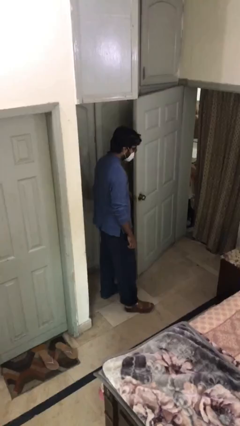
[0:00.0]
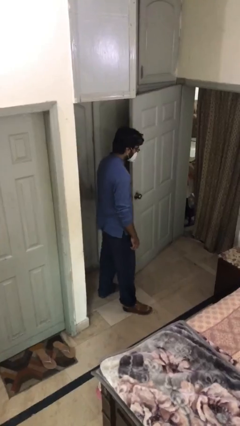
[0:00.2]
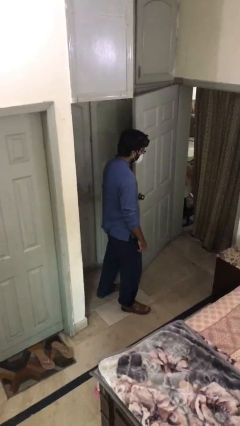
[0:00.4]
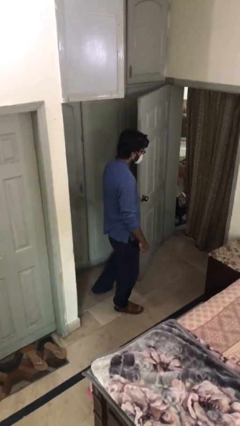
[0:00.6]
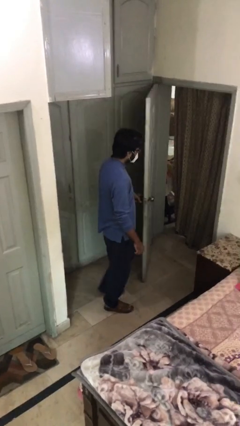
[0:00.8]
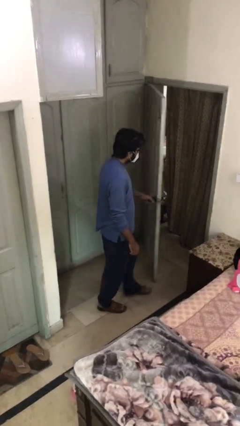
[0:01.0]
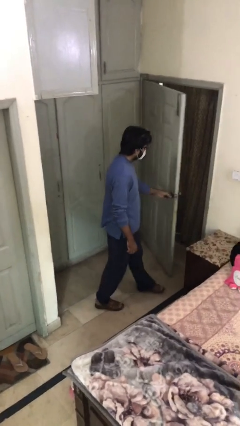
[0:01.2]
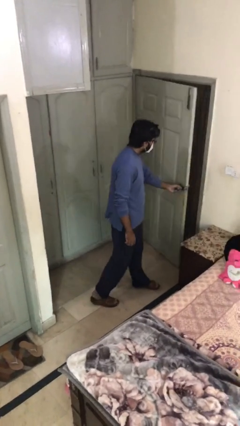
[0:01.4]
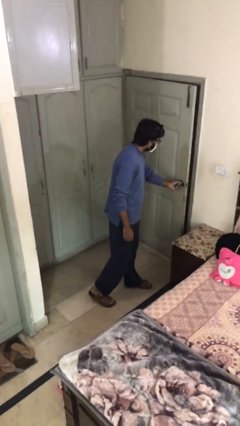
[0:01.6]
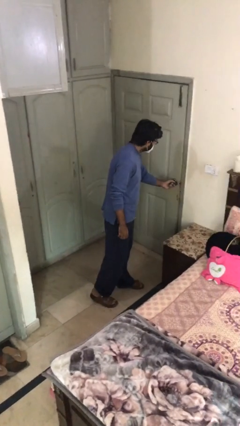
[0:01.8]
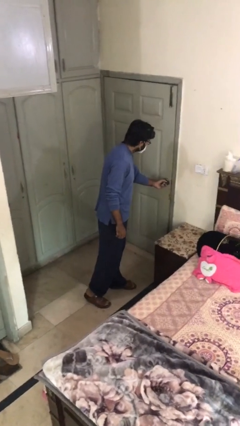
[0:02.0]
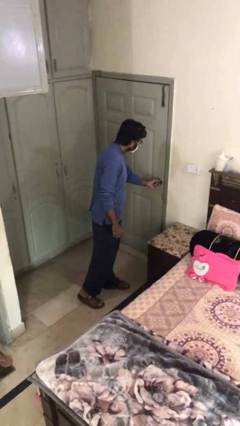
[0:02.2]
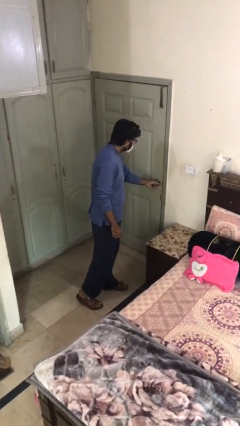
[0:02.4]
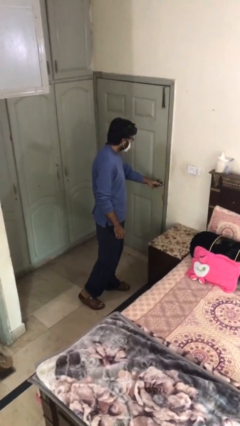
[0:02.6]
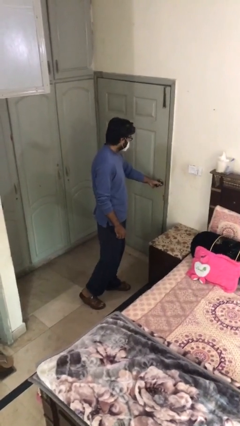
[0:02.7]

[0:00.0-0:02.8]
person closes facility door

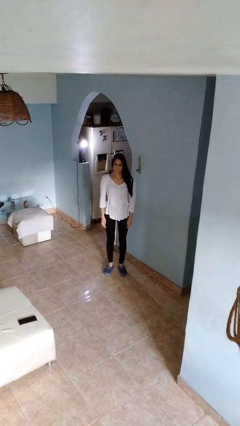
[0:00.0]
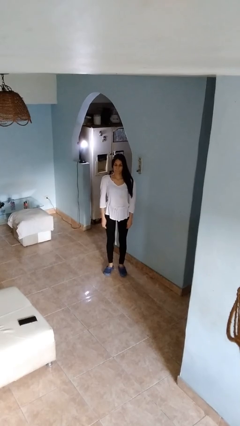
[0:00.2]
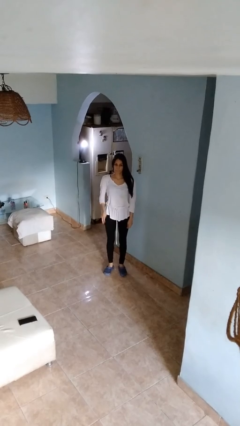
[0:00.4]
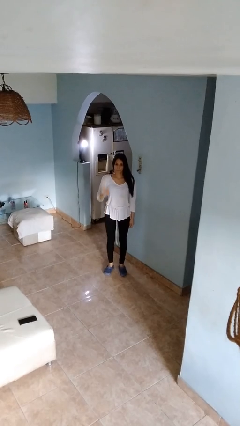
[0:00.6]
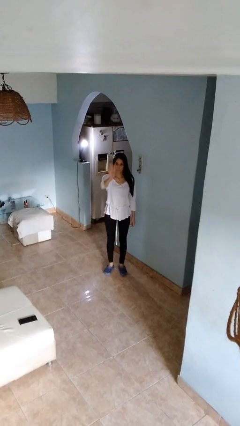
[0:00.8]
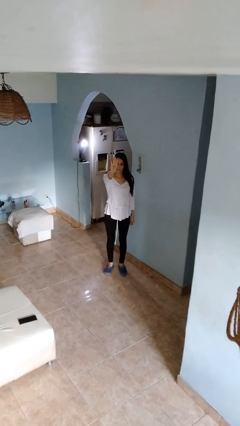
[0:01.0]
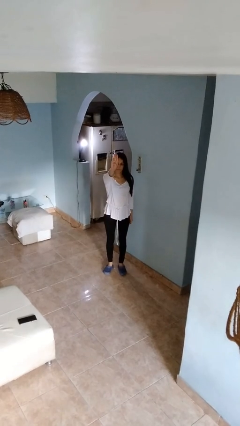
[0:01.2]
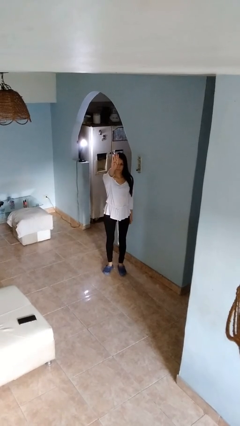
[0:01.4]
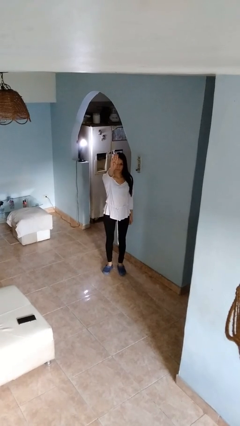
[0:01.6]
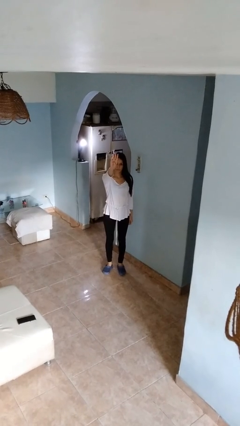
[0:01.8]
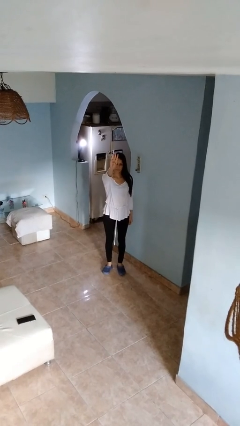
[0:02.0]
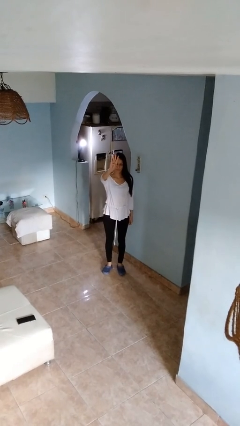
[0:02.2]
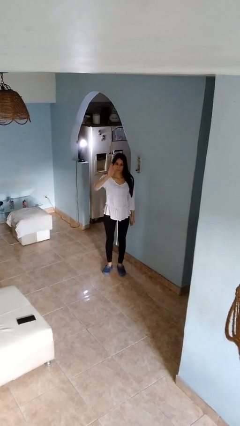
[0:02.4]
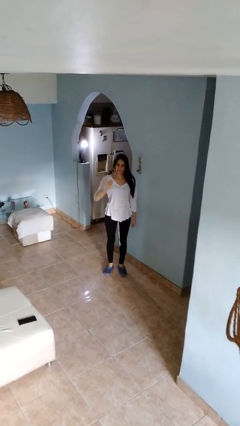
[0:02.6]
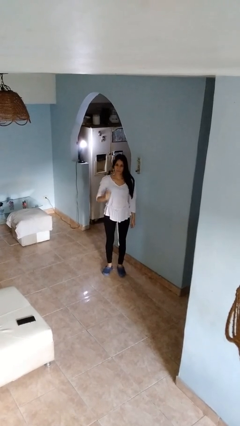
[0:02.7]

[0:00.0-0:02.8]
person gestures number four

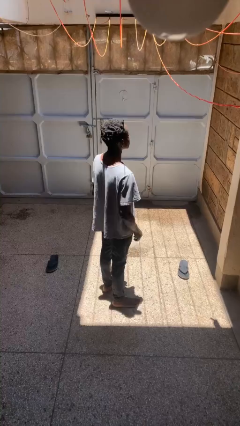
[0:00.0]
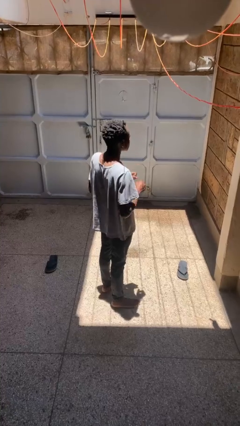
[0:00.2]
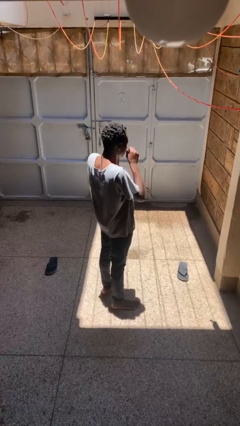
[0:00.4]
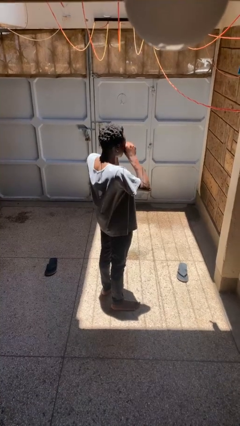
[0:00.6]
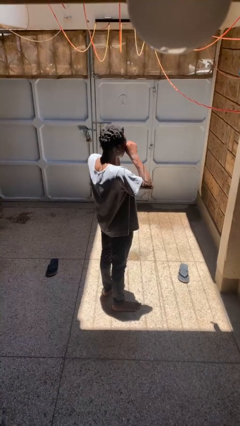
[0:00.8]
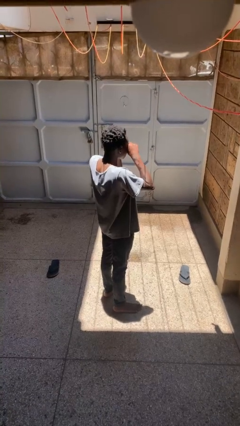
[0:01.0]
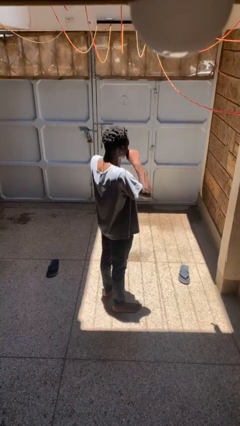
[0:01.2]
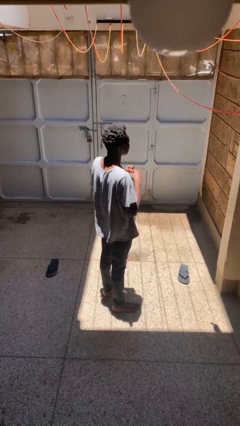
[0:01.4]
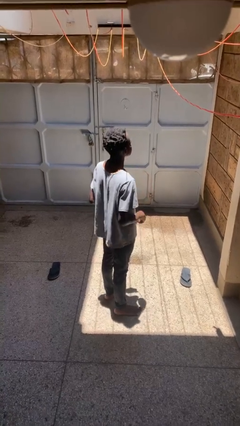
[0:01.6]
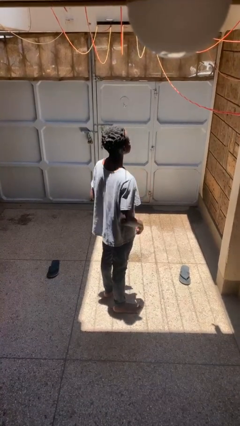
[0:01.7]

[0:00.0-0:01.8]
person rubs eyes

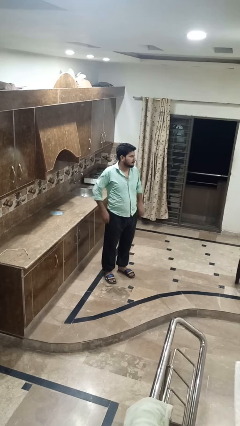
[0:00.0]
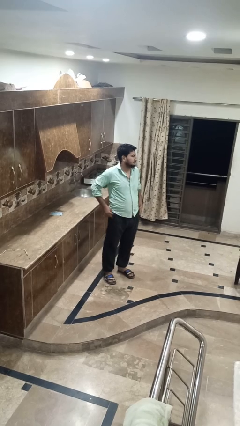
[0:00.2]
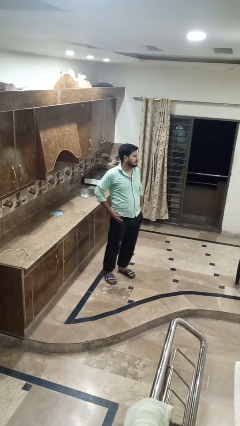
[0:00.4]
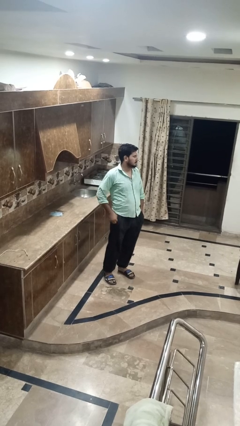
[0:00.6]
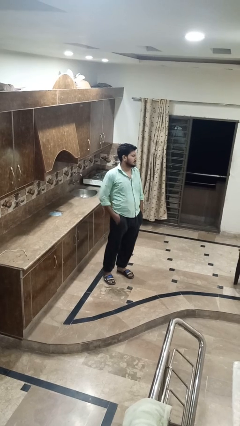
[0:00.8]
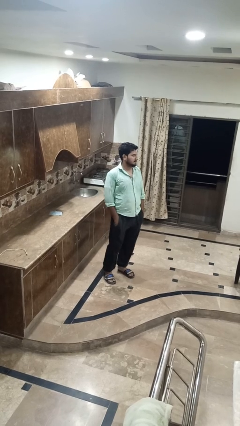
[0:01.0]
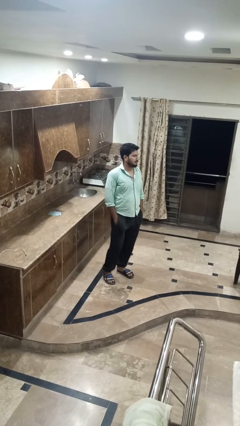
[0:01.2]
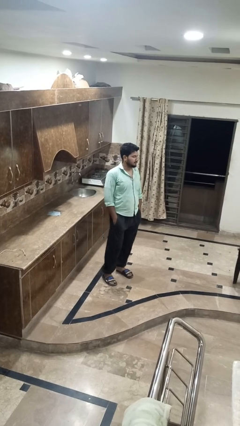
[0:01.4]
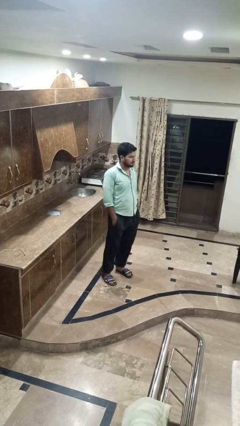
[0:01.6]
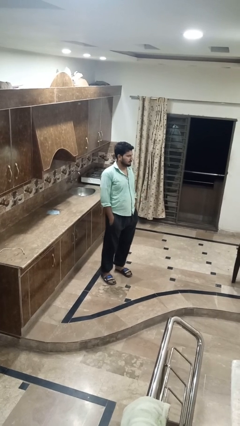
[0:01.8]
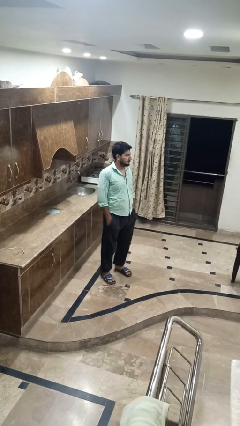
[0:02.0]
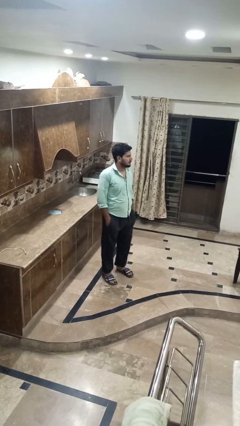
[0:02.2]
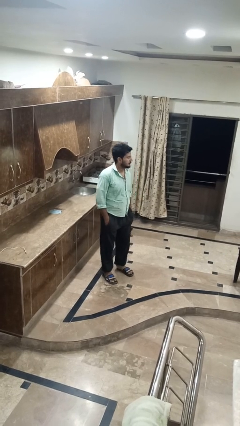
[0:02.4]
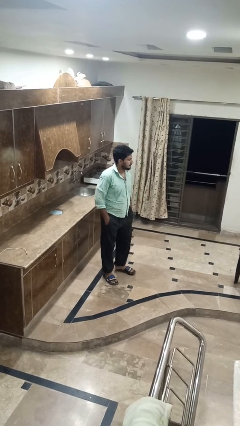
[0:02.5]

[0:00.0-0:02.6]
person puts hands in back pockets

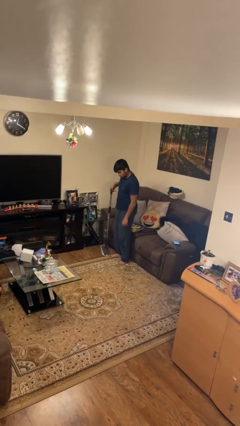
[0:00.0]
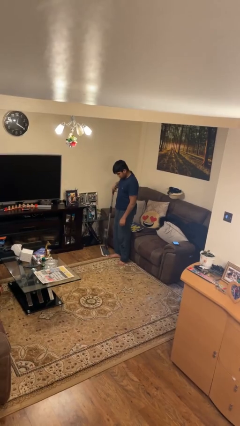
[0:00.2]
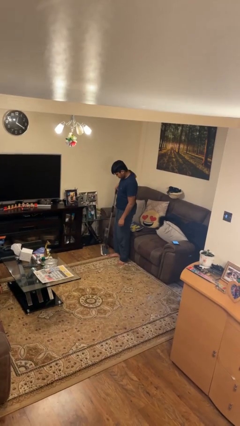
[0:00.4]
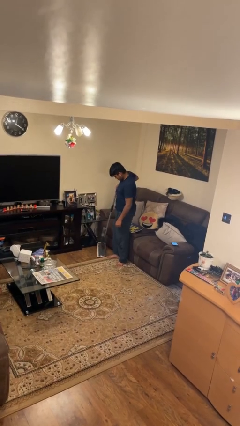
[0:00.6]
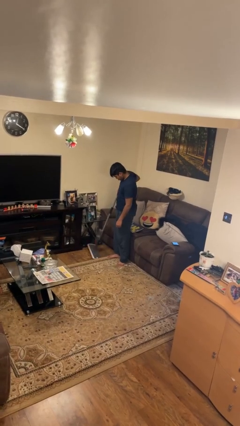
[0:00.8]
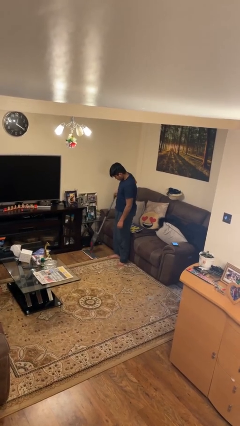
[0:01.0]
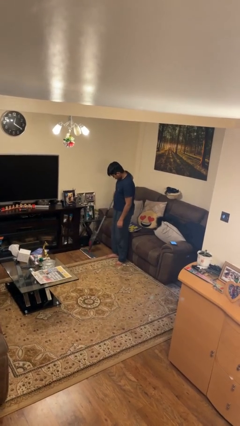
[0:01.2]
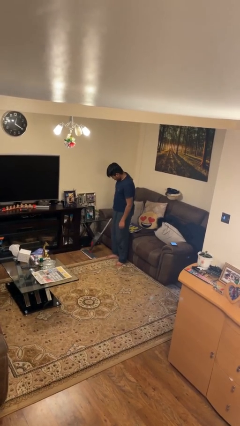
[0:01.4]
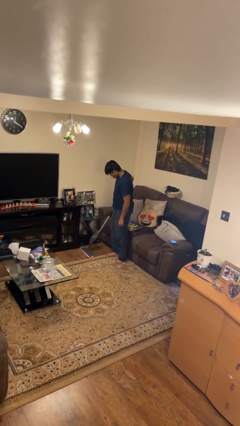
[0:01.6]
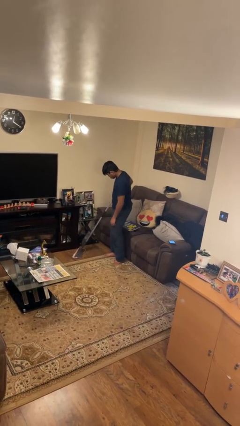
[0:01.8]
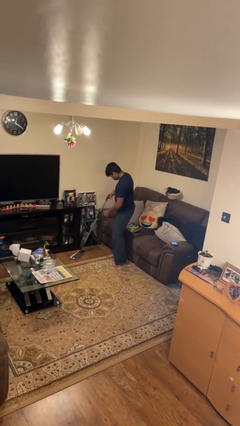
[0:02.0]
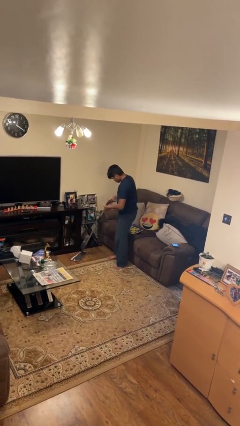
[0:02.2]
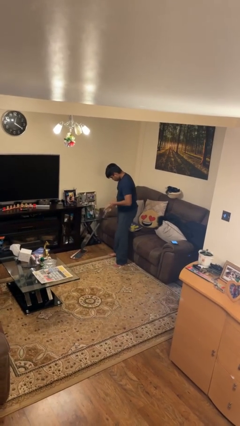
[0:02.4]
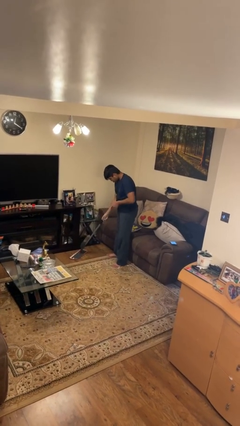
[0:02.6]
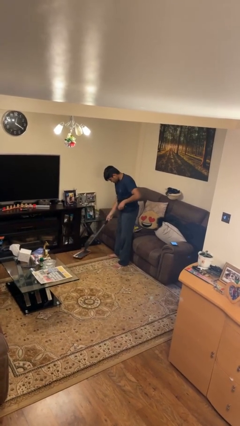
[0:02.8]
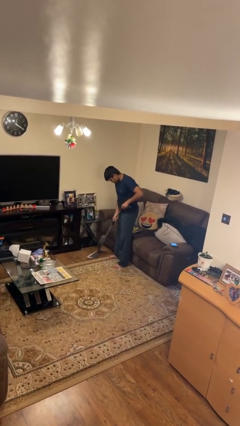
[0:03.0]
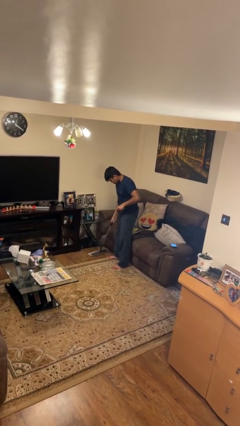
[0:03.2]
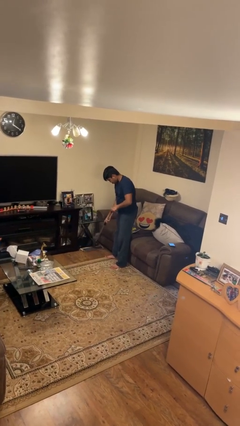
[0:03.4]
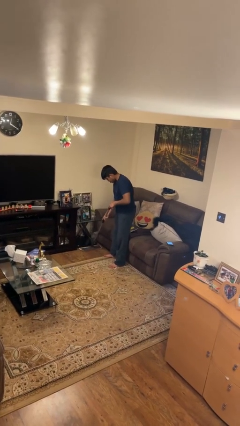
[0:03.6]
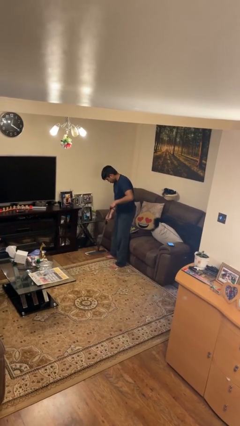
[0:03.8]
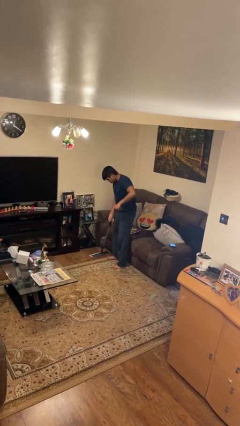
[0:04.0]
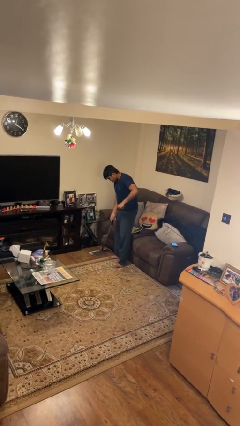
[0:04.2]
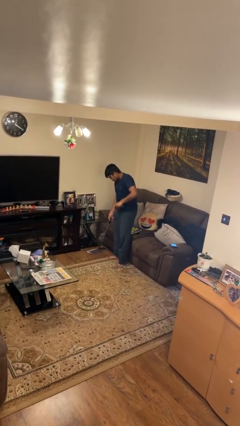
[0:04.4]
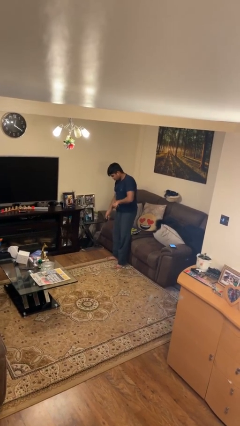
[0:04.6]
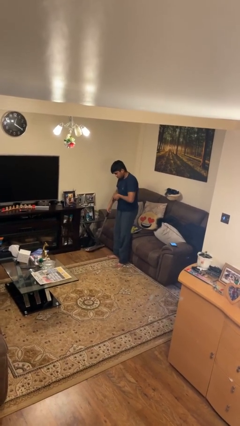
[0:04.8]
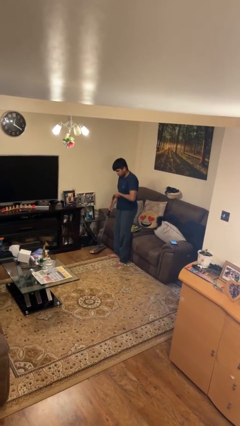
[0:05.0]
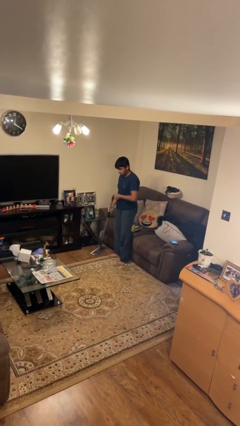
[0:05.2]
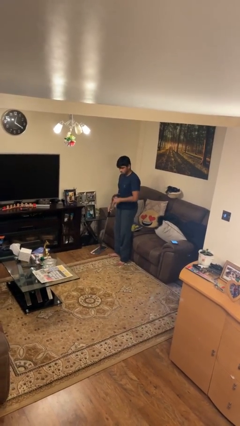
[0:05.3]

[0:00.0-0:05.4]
person mops

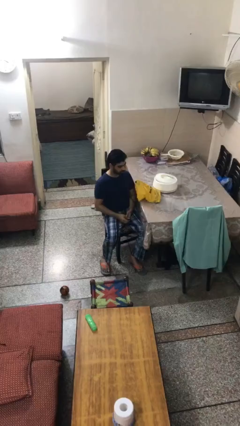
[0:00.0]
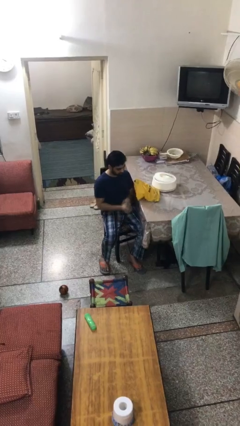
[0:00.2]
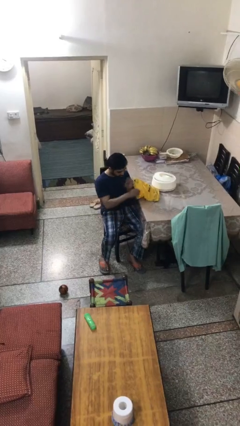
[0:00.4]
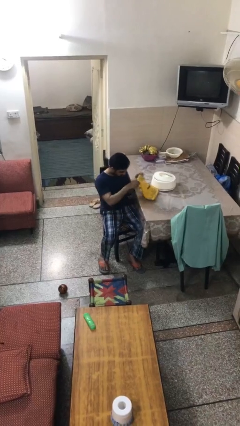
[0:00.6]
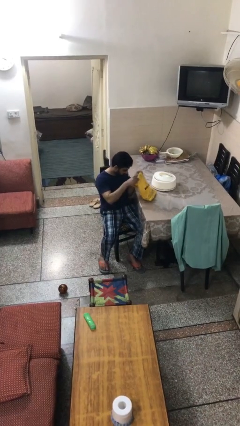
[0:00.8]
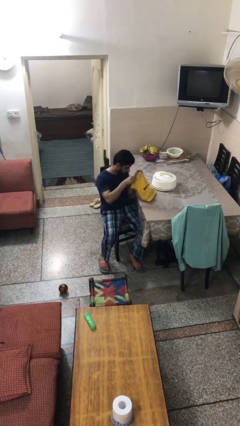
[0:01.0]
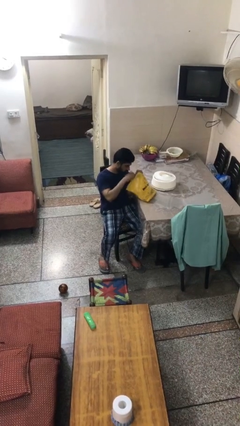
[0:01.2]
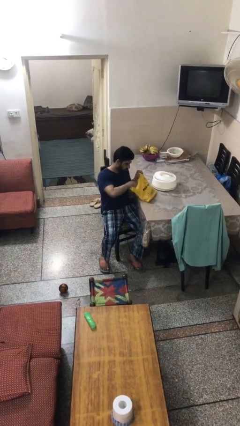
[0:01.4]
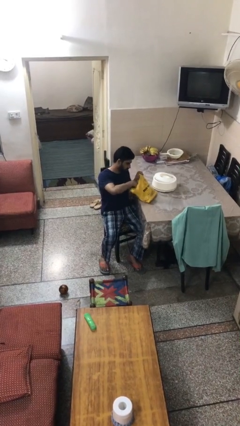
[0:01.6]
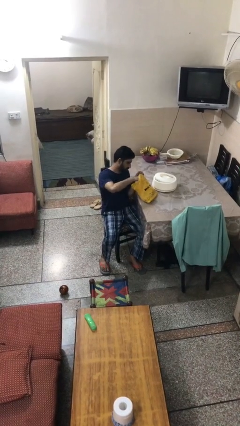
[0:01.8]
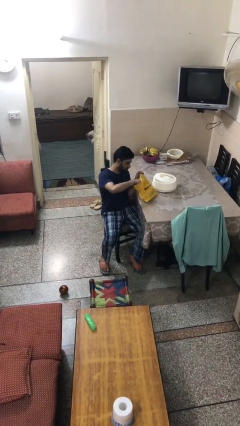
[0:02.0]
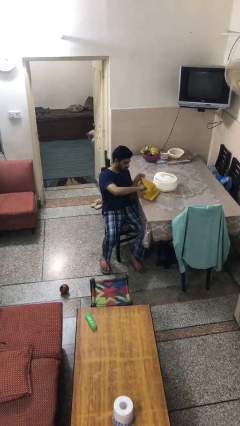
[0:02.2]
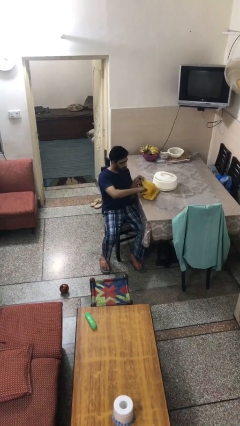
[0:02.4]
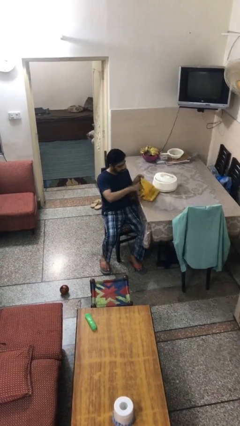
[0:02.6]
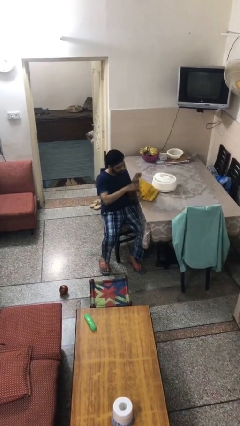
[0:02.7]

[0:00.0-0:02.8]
person searches in bag
